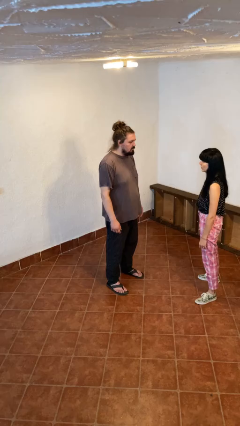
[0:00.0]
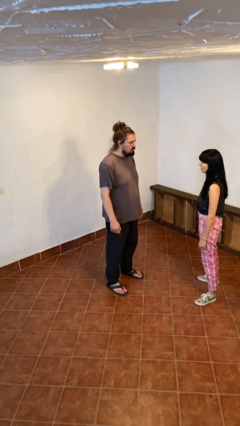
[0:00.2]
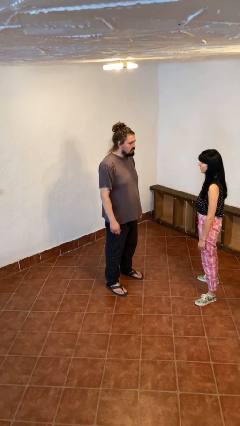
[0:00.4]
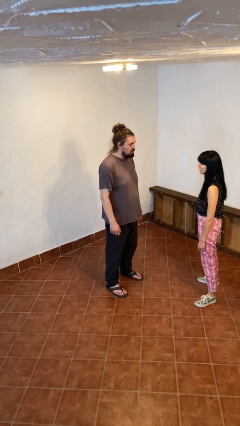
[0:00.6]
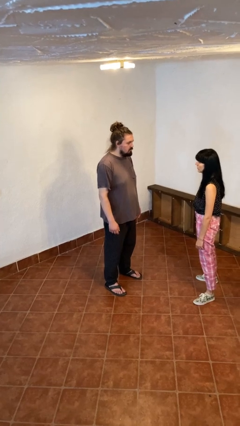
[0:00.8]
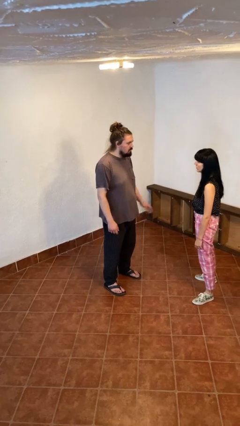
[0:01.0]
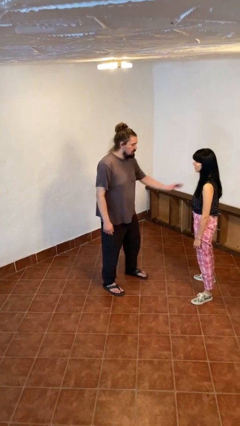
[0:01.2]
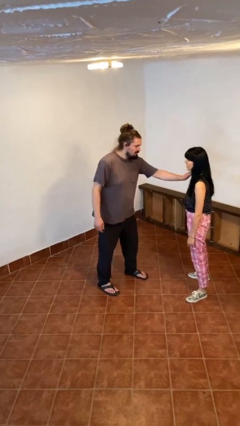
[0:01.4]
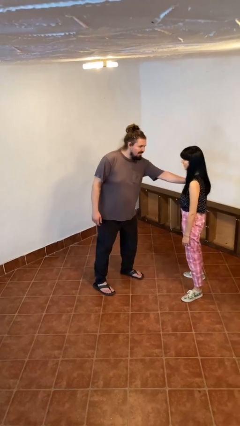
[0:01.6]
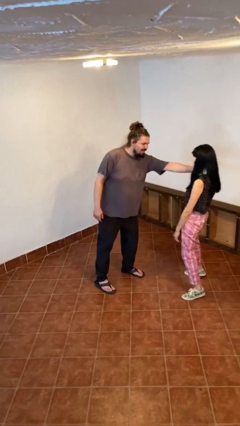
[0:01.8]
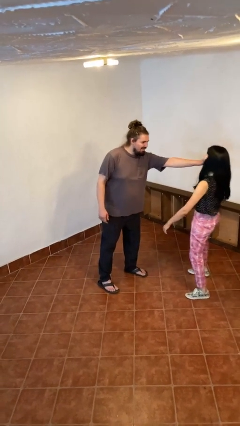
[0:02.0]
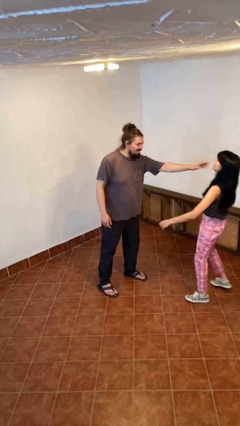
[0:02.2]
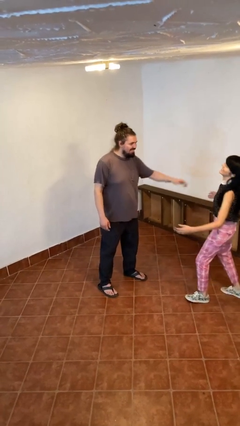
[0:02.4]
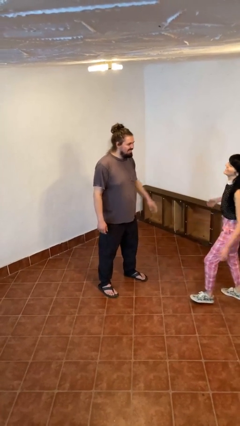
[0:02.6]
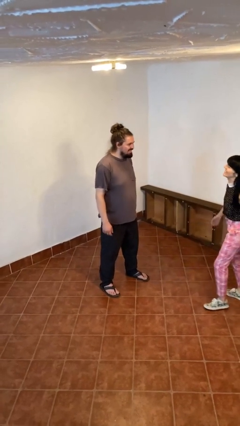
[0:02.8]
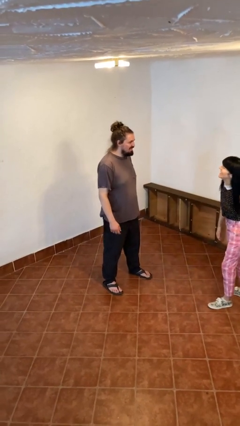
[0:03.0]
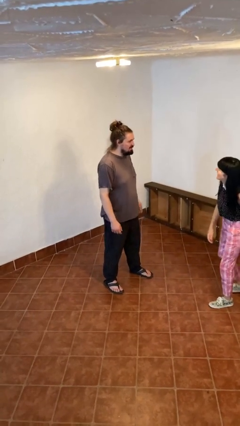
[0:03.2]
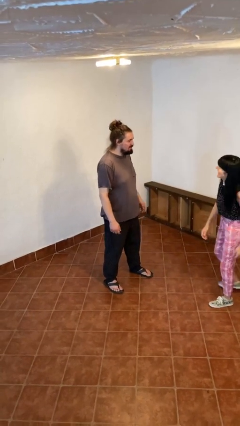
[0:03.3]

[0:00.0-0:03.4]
person shoves person

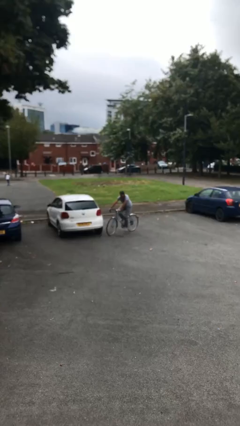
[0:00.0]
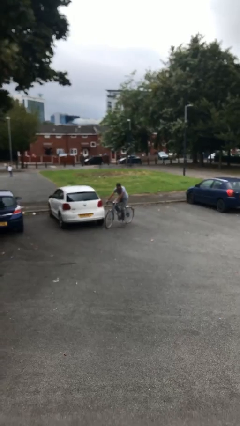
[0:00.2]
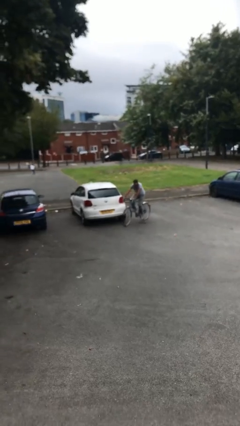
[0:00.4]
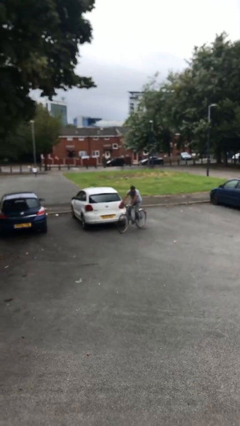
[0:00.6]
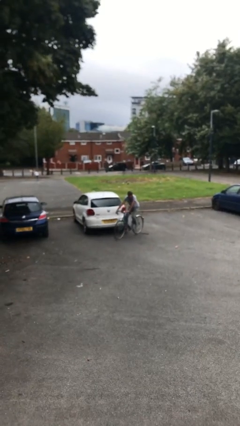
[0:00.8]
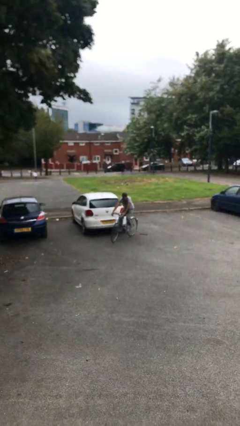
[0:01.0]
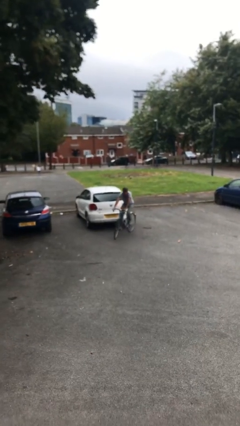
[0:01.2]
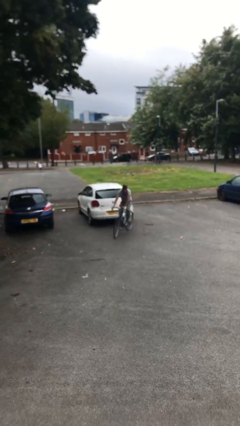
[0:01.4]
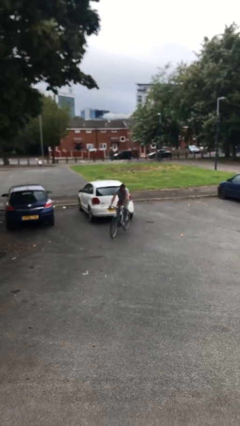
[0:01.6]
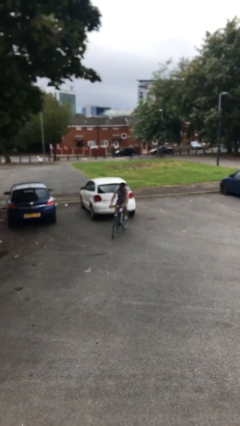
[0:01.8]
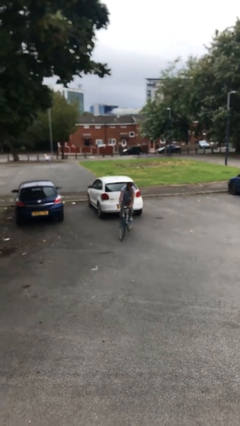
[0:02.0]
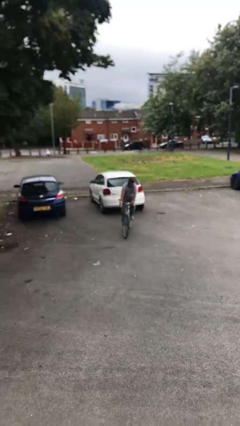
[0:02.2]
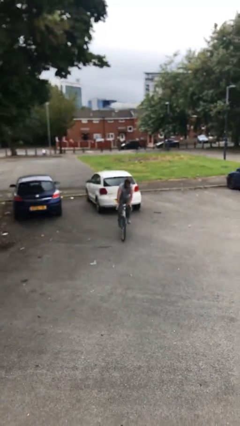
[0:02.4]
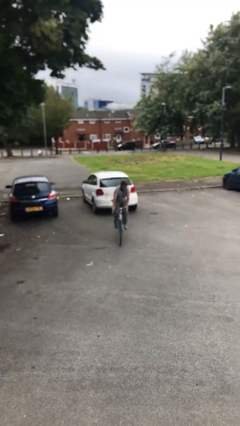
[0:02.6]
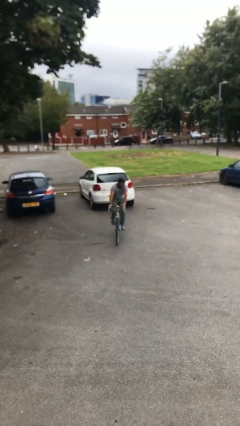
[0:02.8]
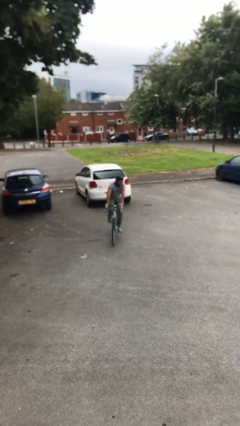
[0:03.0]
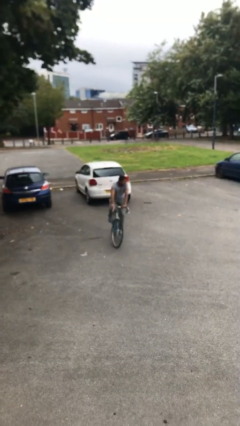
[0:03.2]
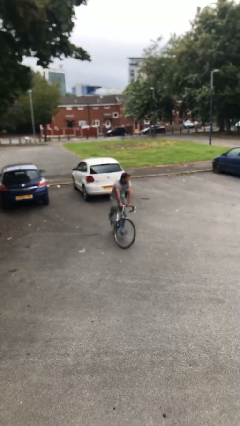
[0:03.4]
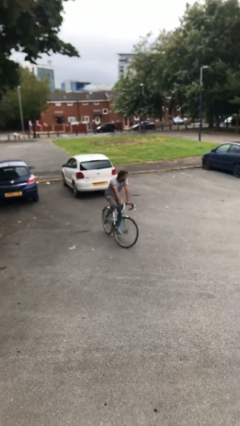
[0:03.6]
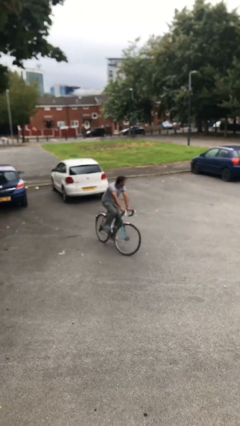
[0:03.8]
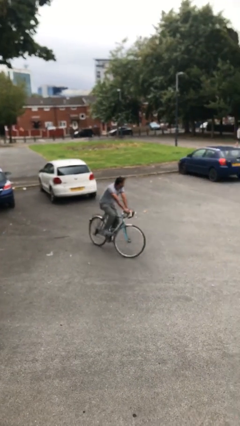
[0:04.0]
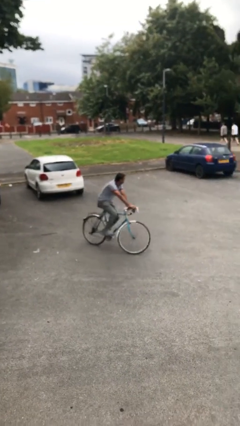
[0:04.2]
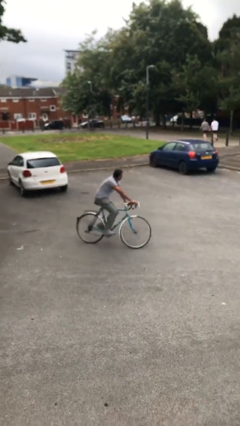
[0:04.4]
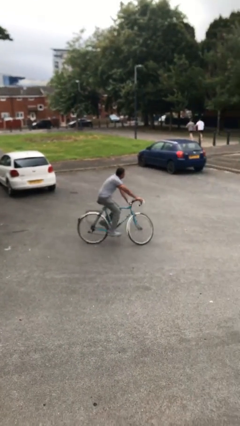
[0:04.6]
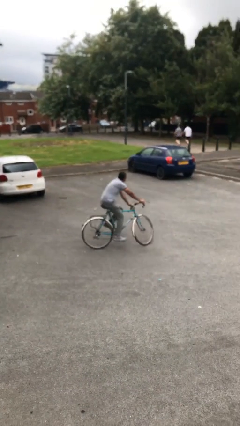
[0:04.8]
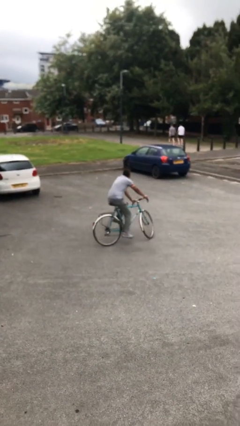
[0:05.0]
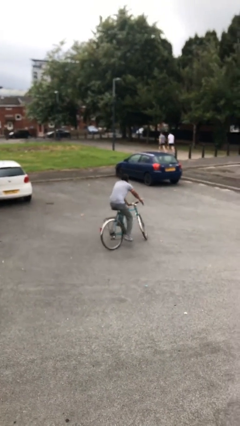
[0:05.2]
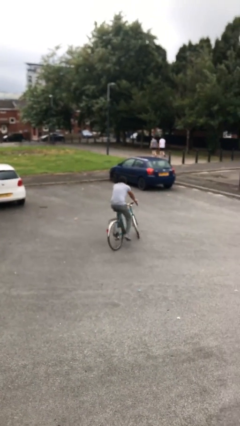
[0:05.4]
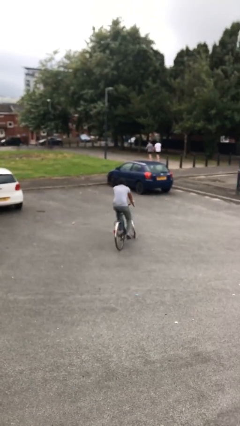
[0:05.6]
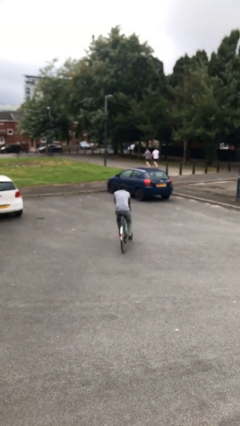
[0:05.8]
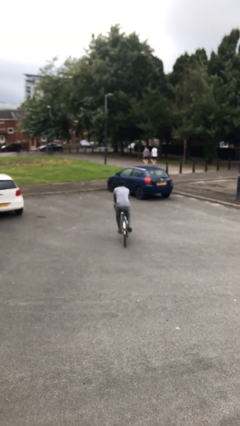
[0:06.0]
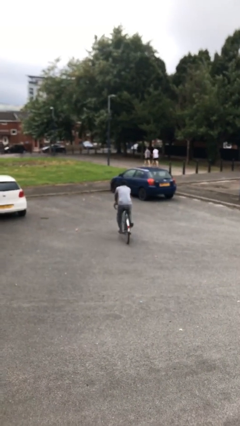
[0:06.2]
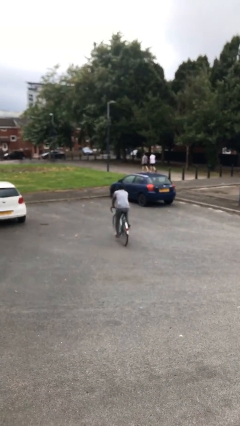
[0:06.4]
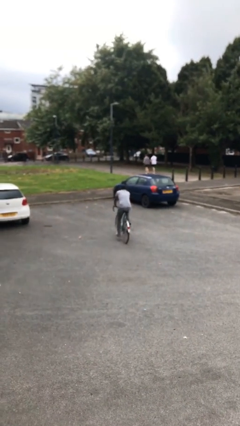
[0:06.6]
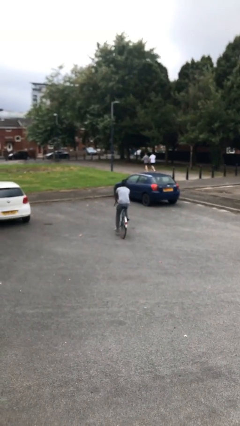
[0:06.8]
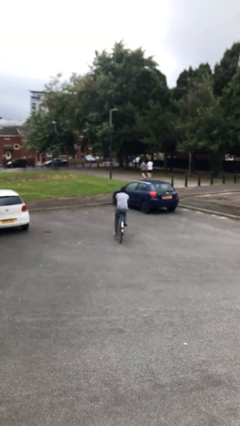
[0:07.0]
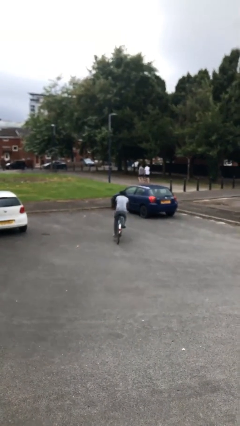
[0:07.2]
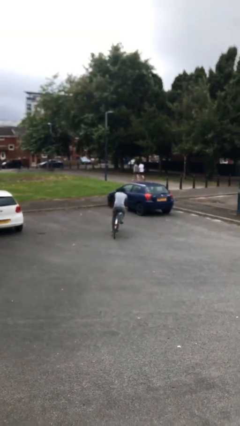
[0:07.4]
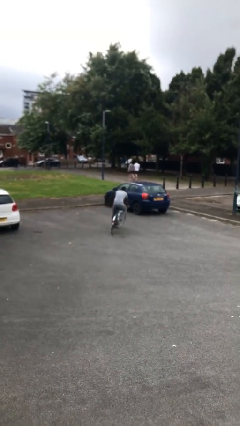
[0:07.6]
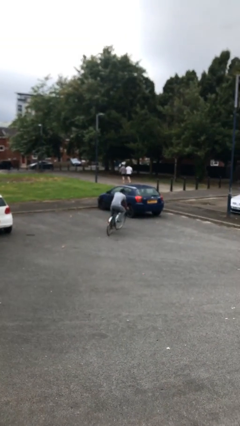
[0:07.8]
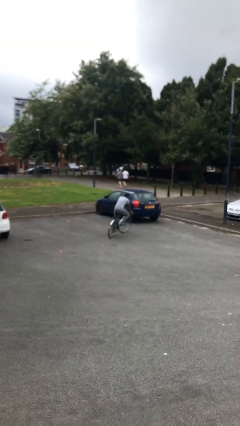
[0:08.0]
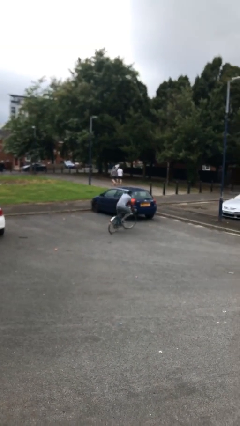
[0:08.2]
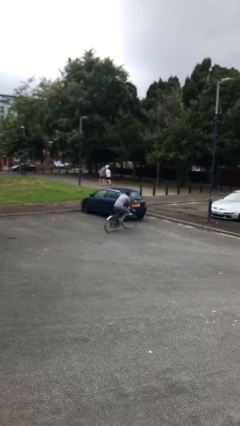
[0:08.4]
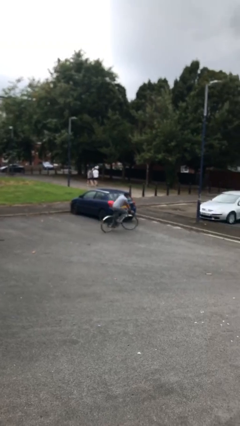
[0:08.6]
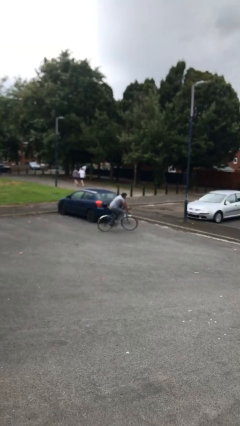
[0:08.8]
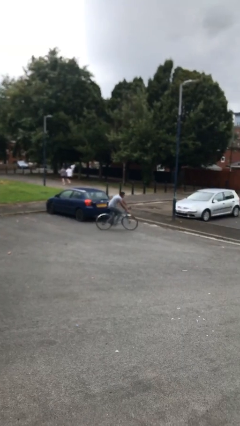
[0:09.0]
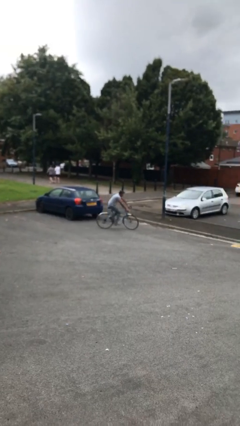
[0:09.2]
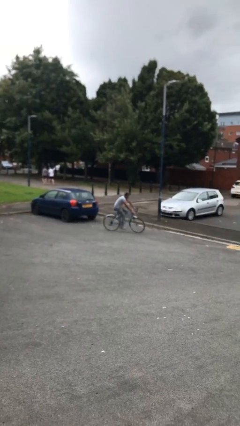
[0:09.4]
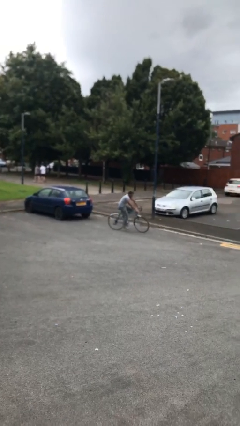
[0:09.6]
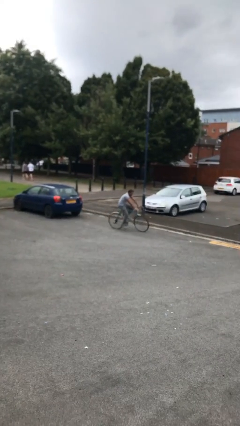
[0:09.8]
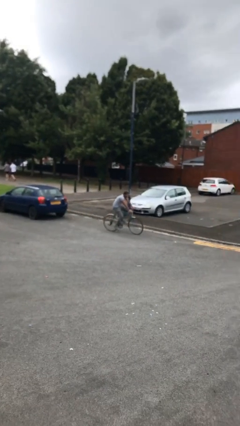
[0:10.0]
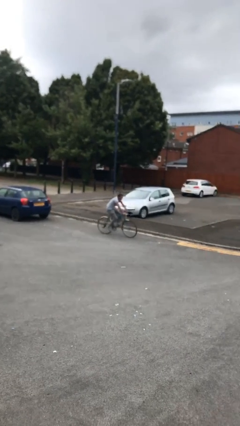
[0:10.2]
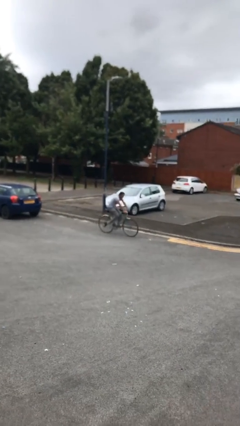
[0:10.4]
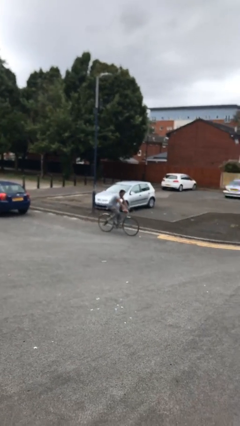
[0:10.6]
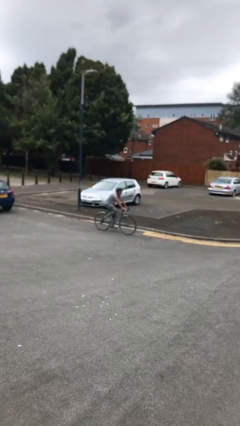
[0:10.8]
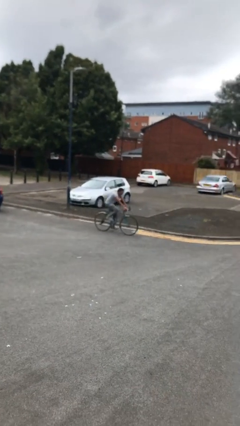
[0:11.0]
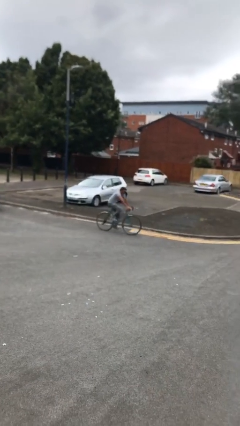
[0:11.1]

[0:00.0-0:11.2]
person rides bicycle

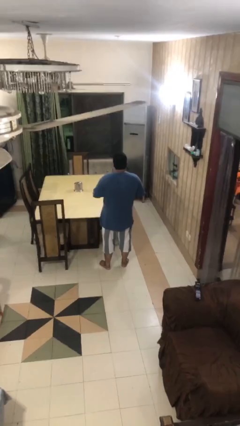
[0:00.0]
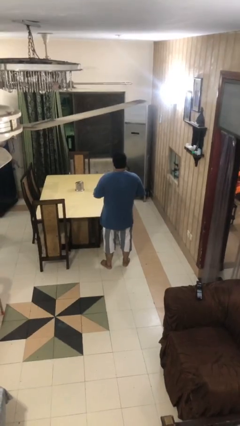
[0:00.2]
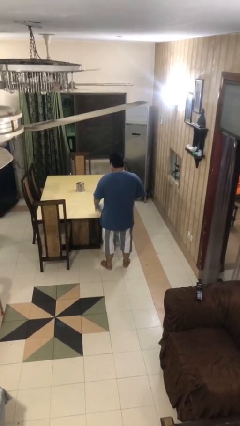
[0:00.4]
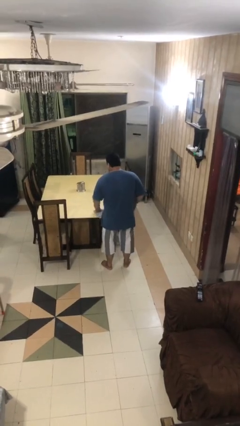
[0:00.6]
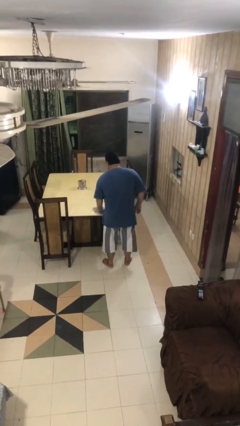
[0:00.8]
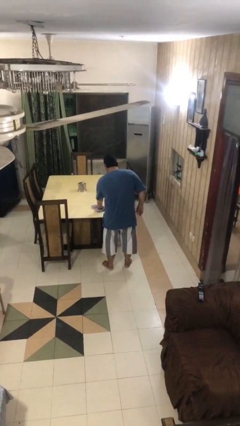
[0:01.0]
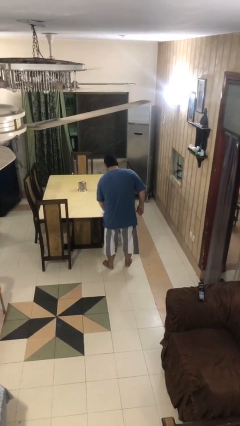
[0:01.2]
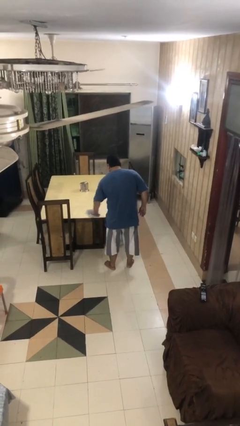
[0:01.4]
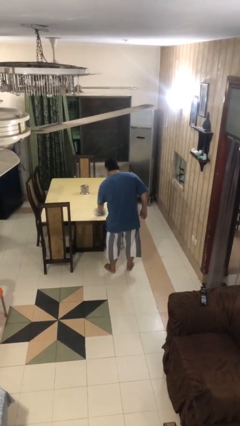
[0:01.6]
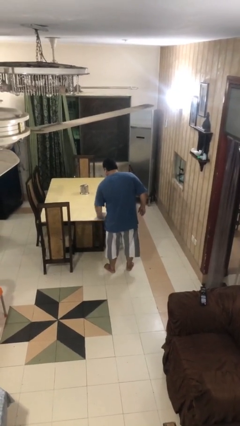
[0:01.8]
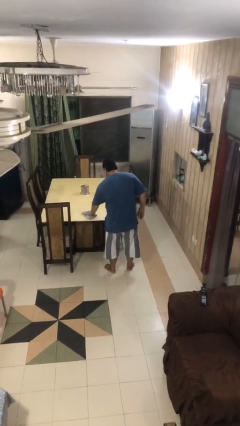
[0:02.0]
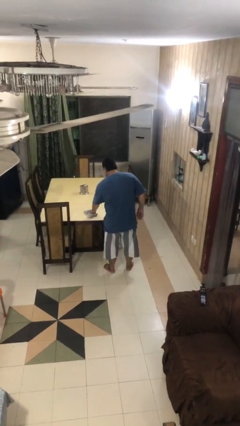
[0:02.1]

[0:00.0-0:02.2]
person cleans table with rag

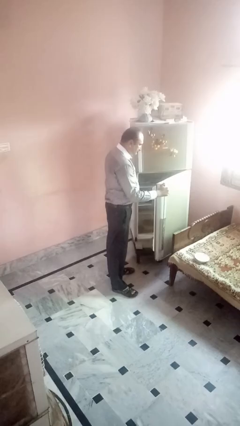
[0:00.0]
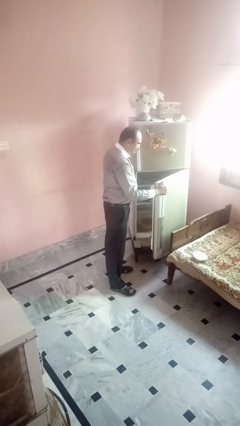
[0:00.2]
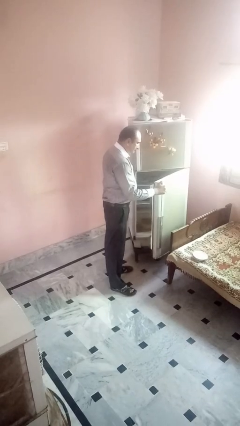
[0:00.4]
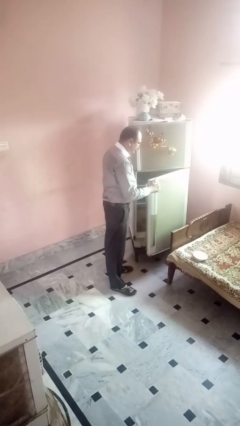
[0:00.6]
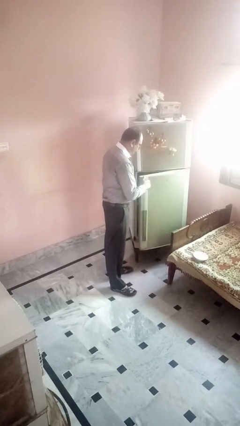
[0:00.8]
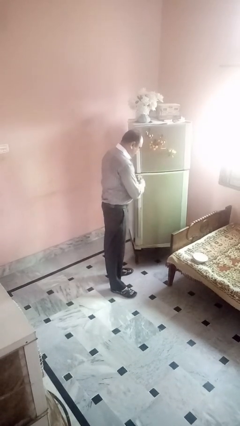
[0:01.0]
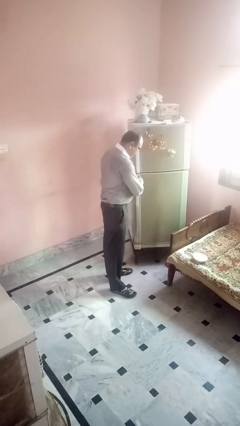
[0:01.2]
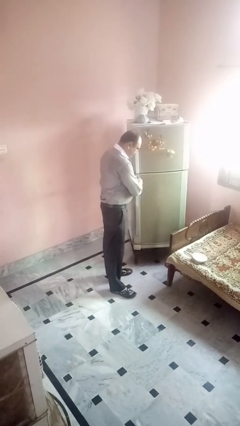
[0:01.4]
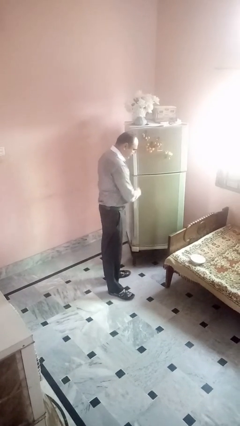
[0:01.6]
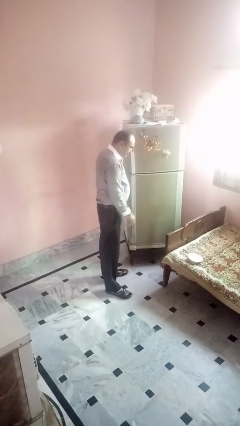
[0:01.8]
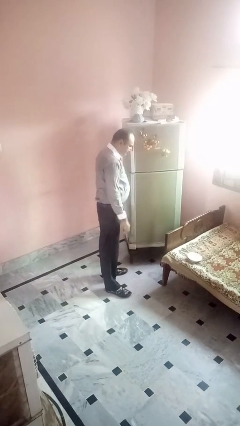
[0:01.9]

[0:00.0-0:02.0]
person closes refrigerator
